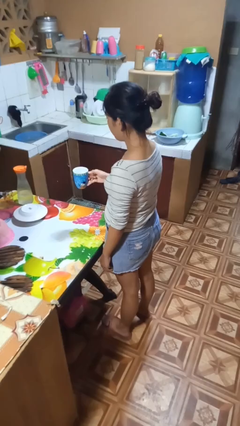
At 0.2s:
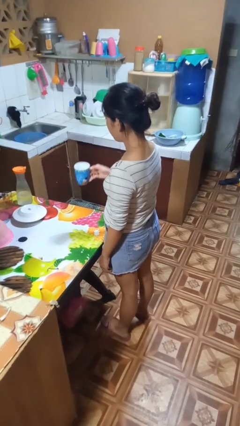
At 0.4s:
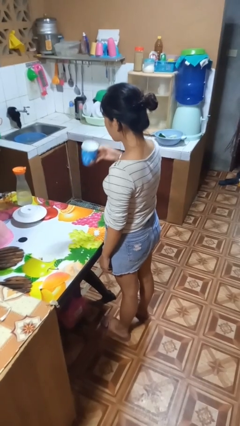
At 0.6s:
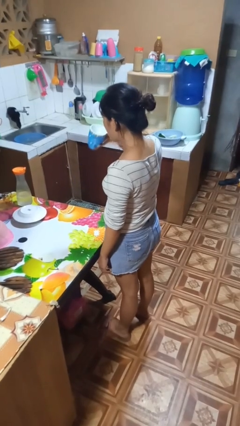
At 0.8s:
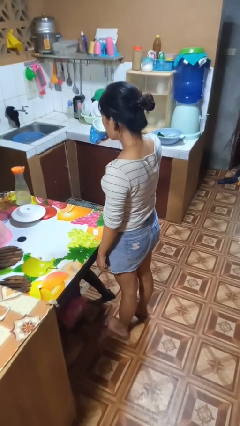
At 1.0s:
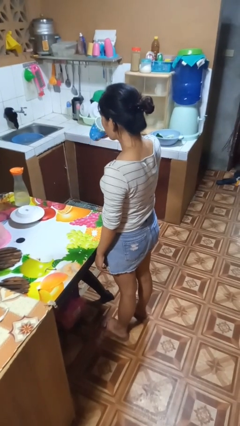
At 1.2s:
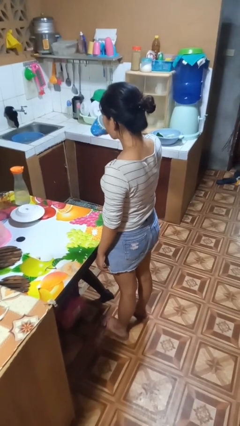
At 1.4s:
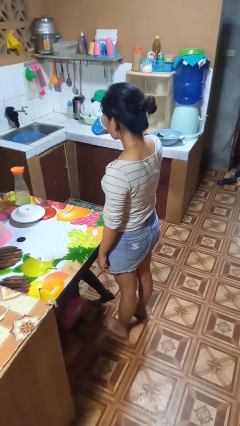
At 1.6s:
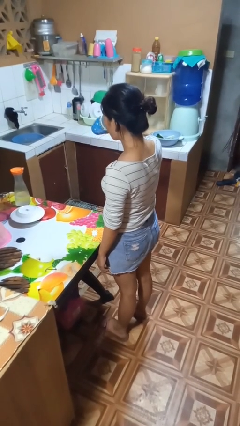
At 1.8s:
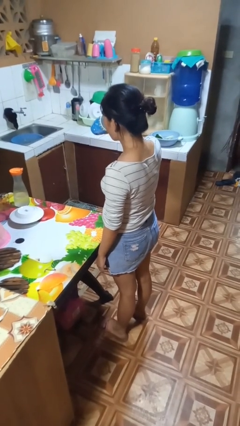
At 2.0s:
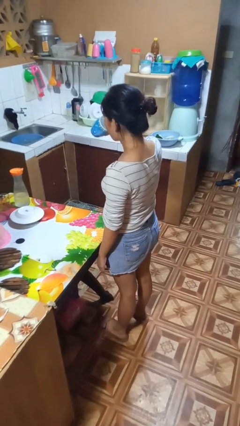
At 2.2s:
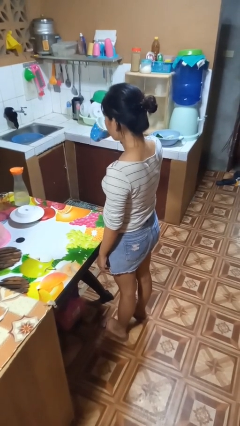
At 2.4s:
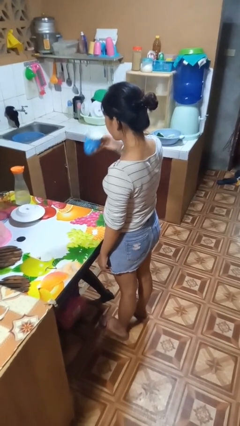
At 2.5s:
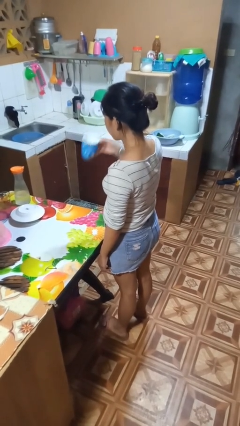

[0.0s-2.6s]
person drinks from mug

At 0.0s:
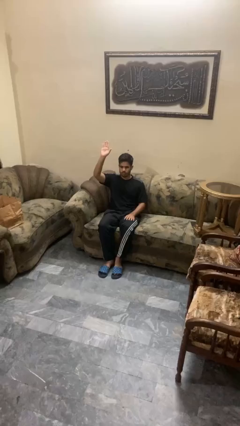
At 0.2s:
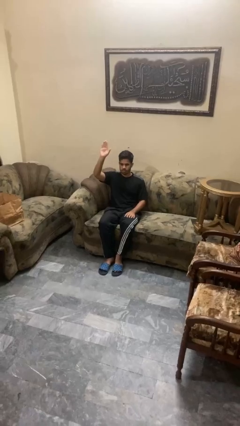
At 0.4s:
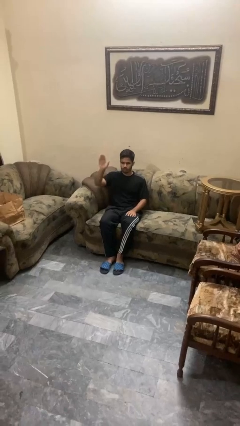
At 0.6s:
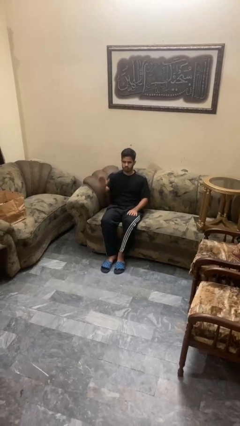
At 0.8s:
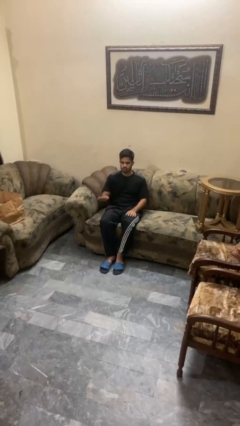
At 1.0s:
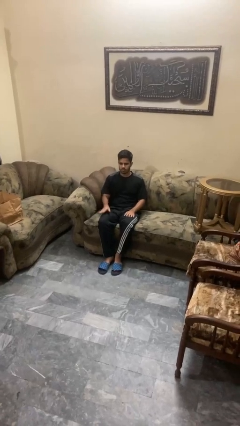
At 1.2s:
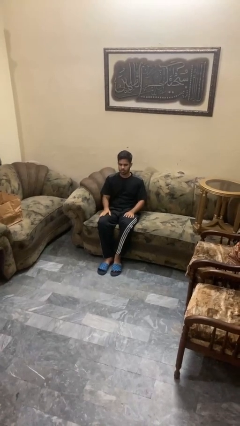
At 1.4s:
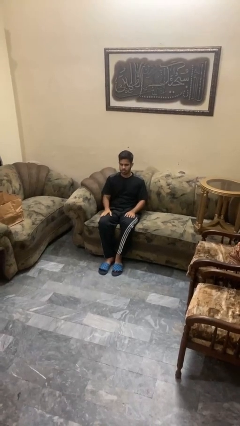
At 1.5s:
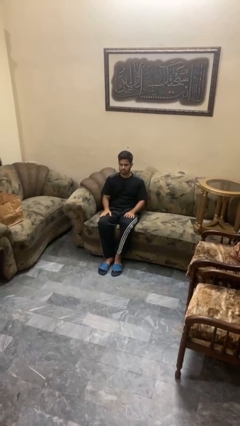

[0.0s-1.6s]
person gestures lower hand

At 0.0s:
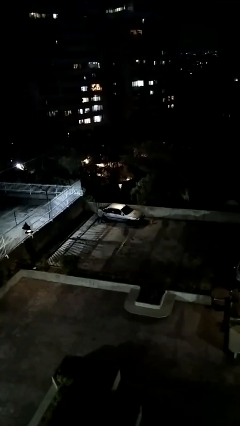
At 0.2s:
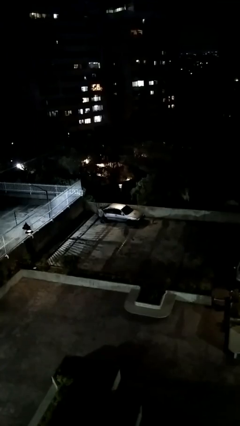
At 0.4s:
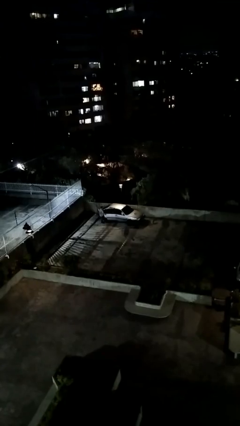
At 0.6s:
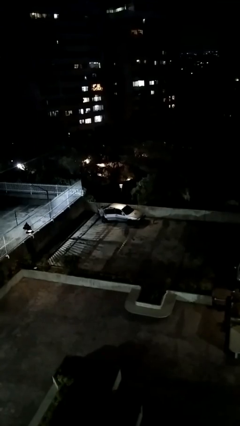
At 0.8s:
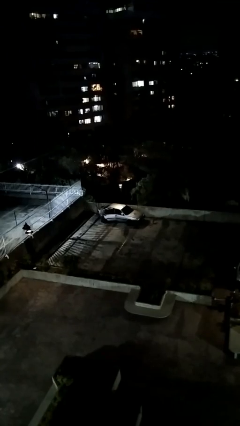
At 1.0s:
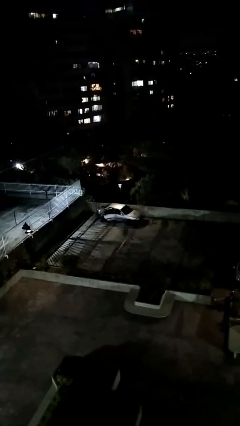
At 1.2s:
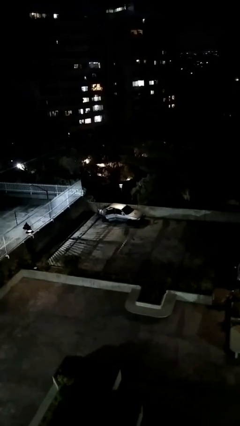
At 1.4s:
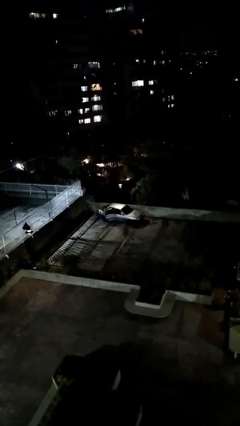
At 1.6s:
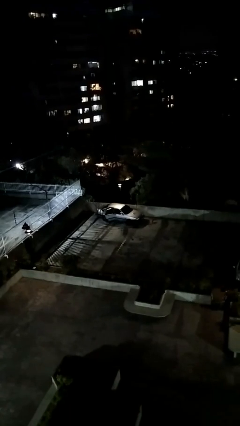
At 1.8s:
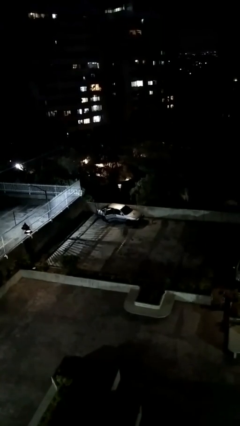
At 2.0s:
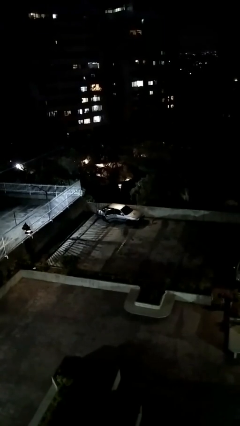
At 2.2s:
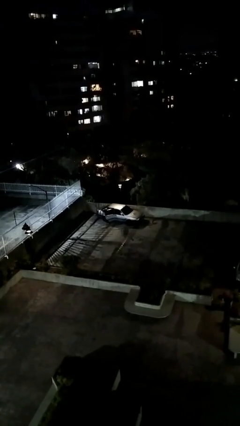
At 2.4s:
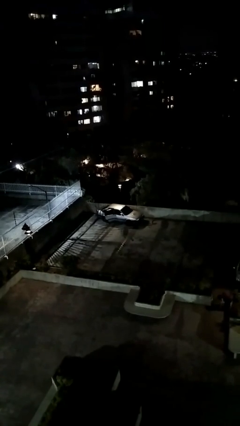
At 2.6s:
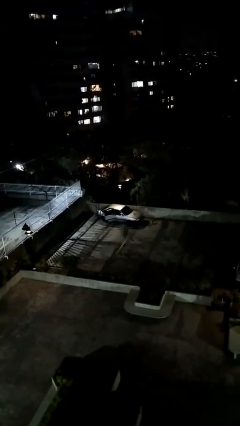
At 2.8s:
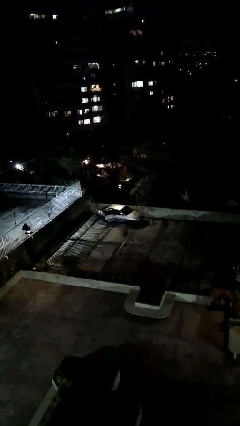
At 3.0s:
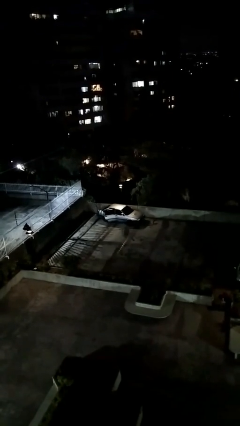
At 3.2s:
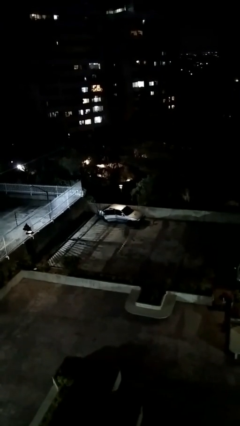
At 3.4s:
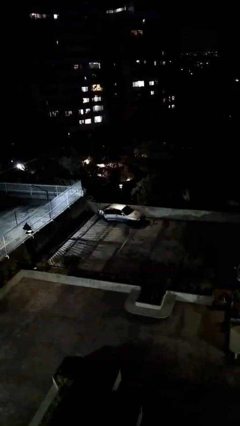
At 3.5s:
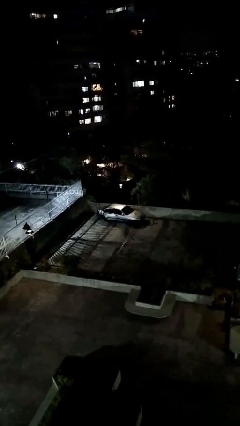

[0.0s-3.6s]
car picks up person

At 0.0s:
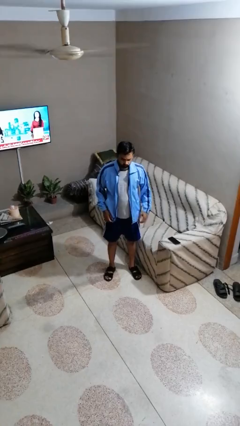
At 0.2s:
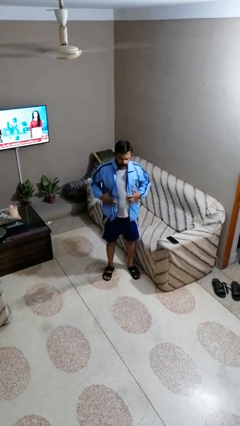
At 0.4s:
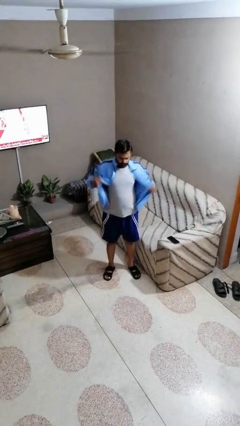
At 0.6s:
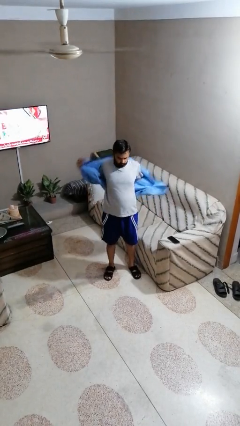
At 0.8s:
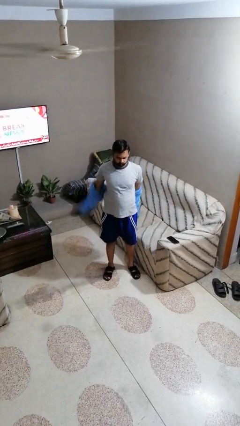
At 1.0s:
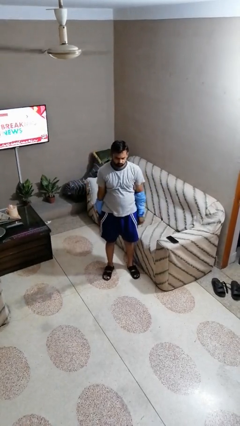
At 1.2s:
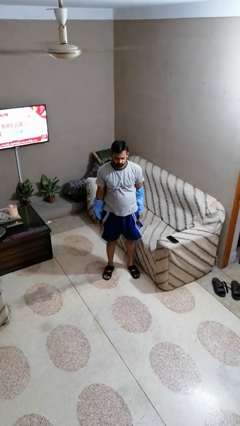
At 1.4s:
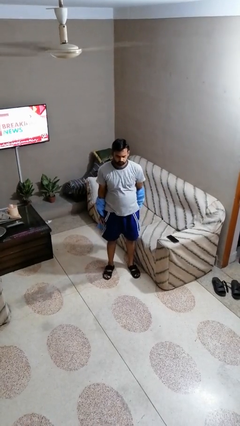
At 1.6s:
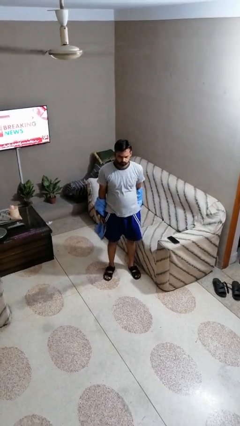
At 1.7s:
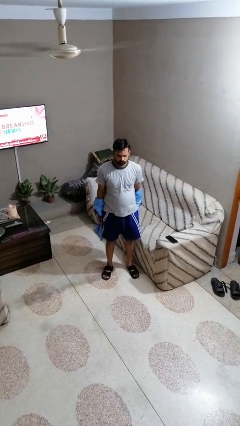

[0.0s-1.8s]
person takes off jacket

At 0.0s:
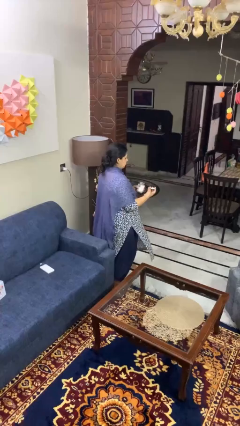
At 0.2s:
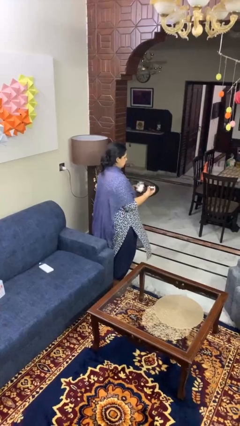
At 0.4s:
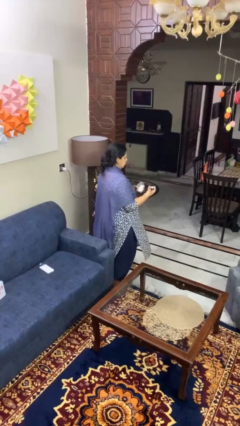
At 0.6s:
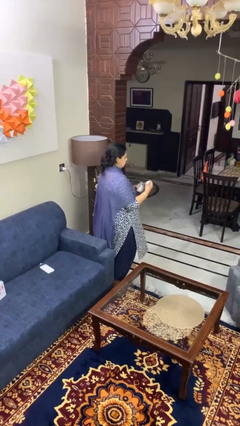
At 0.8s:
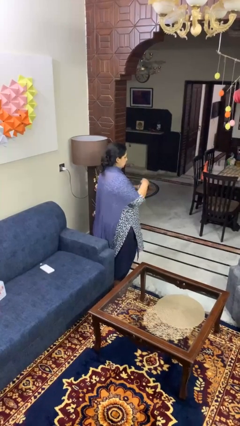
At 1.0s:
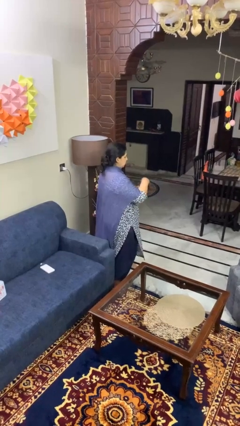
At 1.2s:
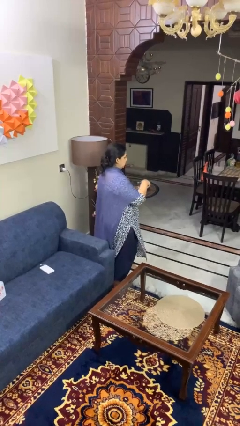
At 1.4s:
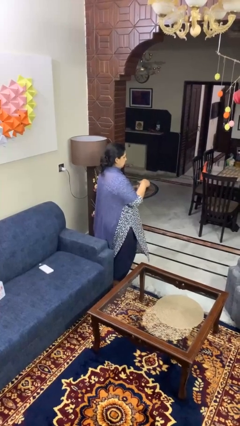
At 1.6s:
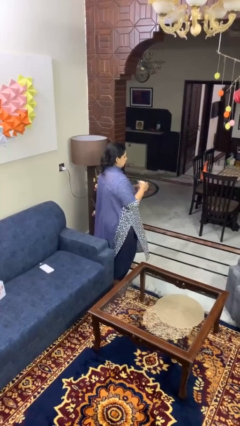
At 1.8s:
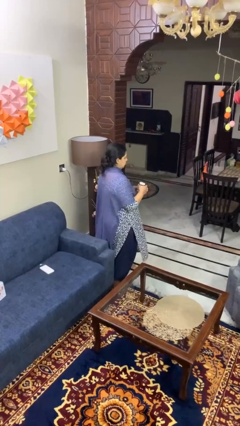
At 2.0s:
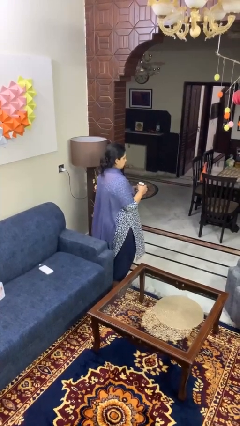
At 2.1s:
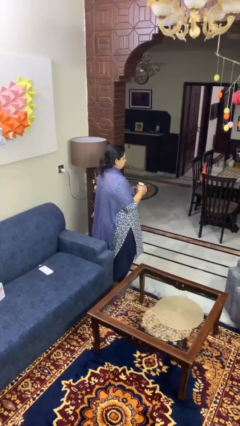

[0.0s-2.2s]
person closes jar

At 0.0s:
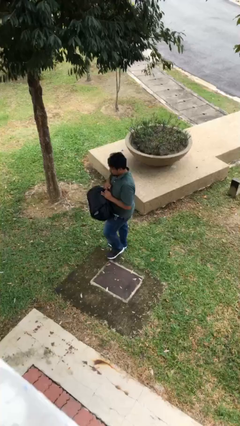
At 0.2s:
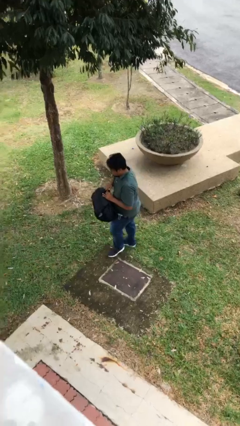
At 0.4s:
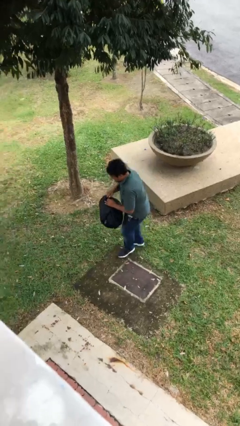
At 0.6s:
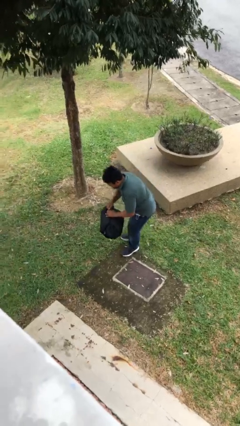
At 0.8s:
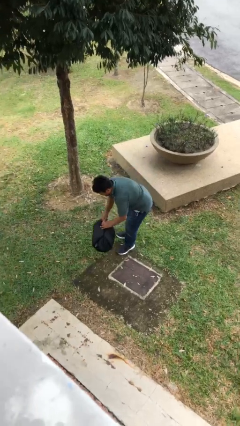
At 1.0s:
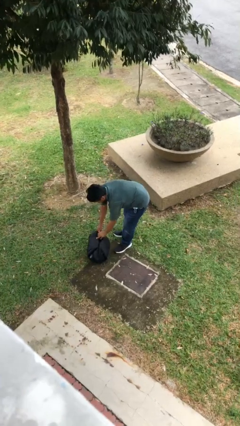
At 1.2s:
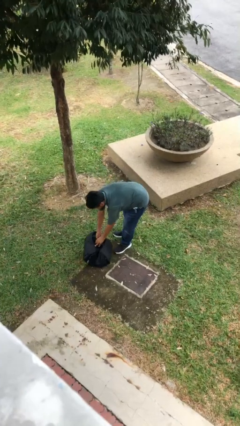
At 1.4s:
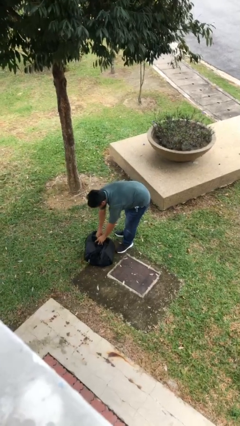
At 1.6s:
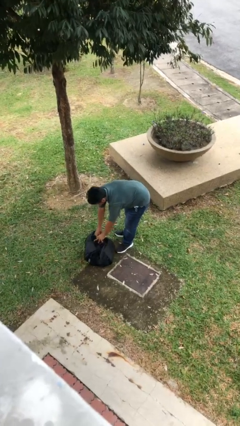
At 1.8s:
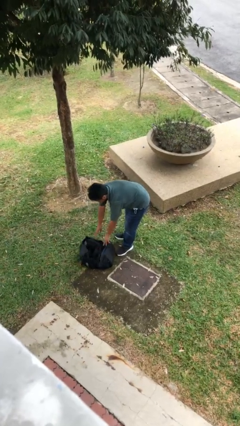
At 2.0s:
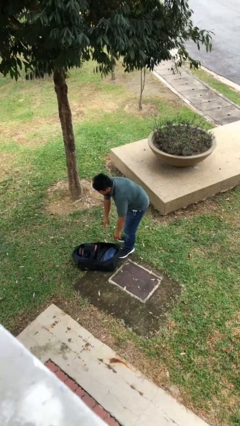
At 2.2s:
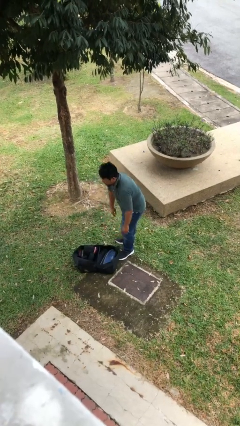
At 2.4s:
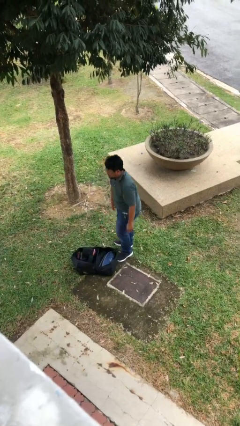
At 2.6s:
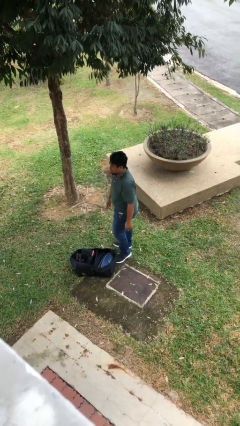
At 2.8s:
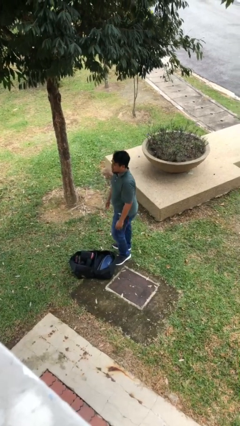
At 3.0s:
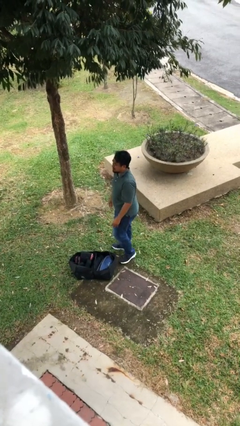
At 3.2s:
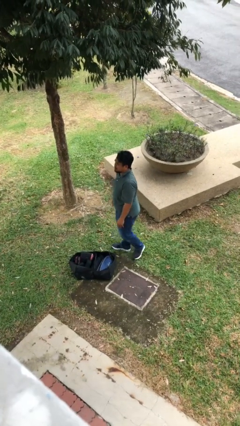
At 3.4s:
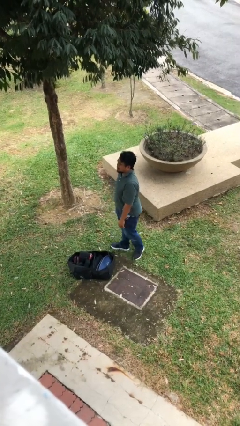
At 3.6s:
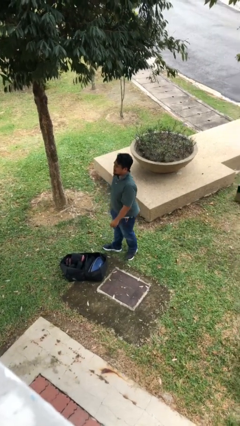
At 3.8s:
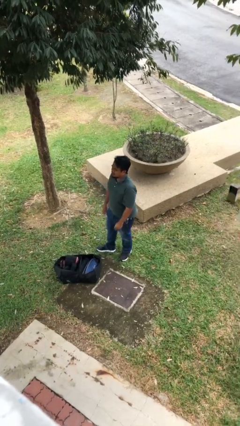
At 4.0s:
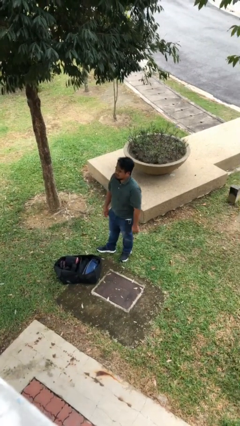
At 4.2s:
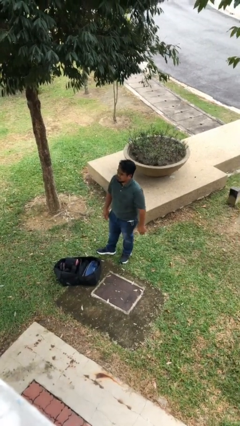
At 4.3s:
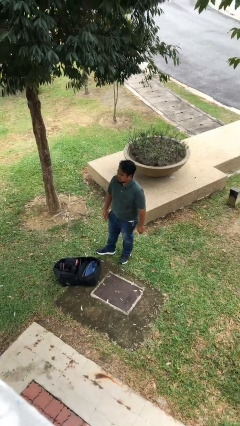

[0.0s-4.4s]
person puts down object on floor

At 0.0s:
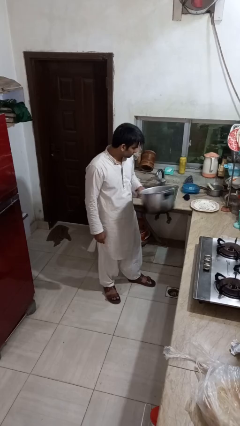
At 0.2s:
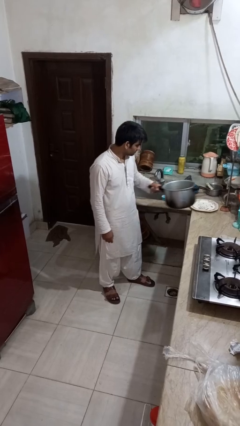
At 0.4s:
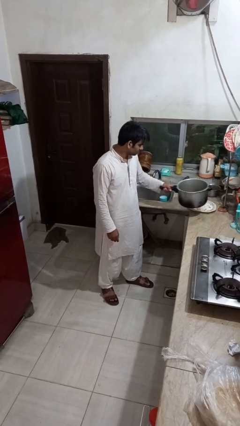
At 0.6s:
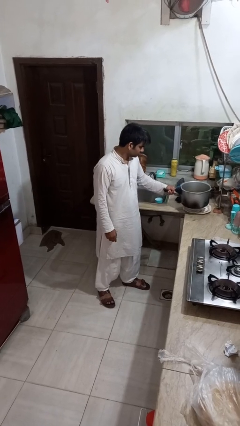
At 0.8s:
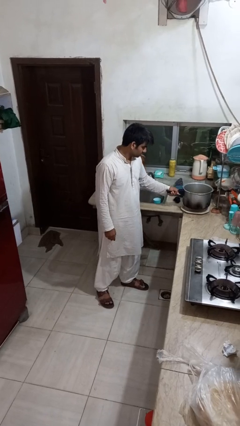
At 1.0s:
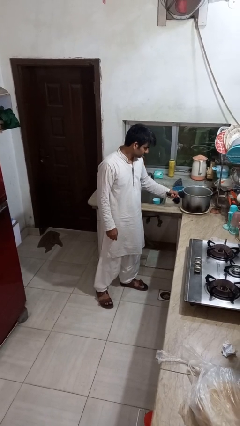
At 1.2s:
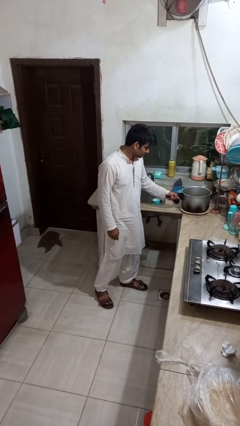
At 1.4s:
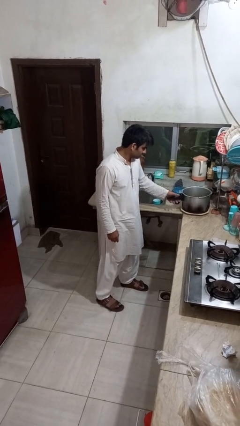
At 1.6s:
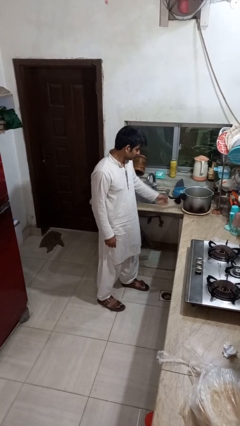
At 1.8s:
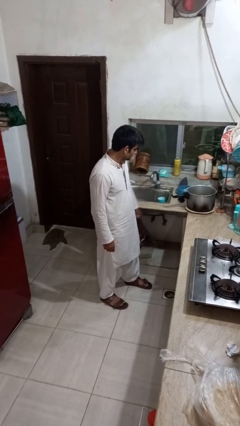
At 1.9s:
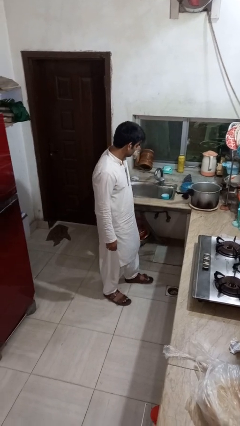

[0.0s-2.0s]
person puts down object on countertop
